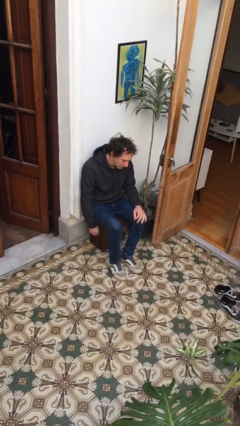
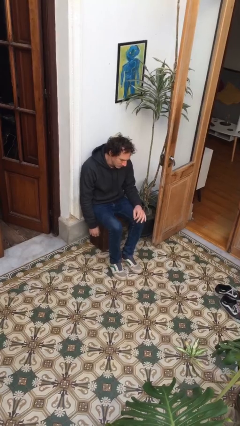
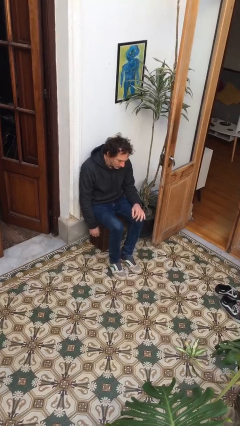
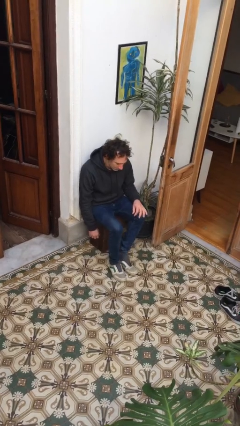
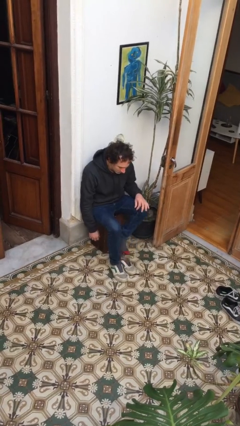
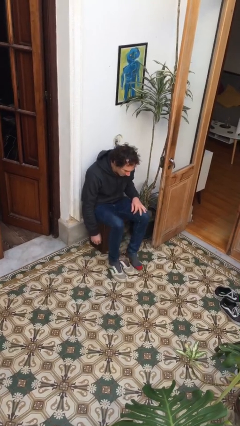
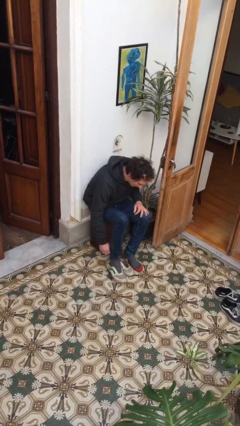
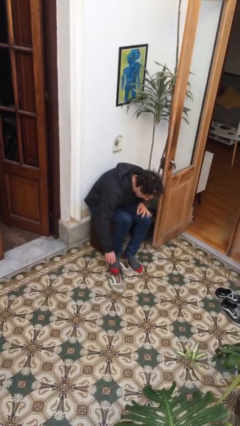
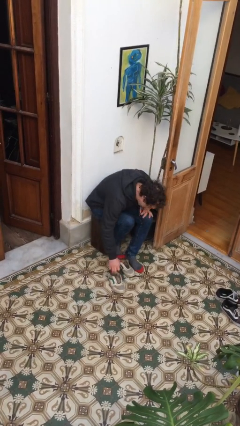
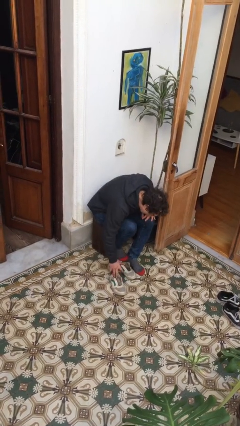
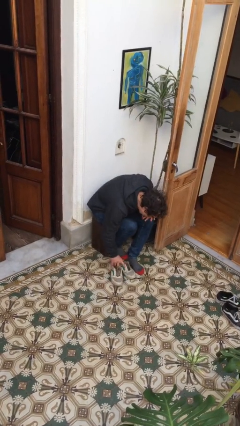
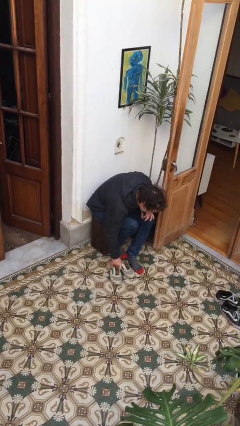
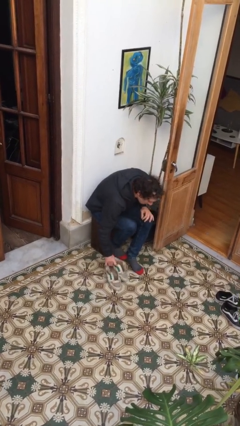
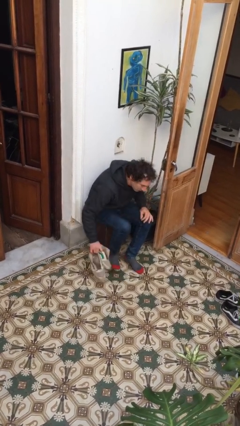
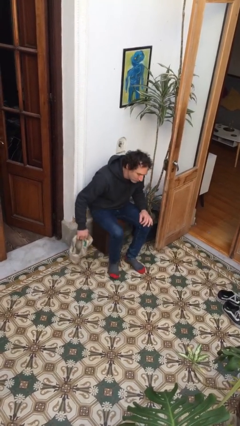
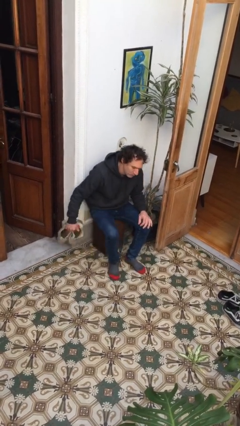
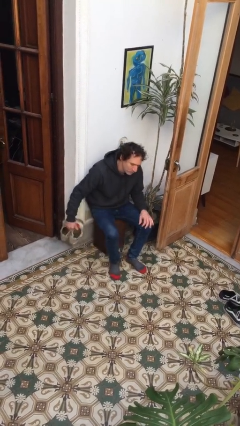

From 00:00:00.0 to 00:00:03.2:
person takes off shoes

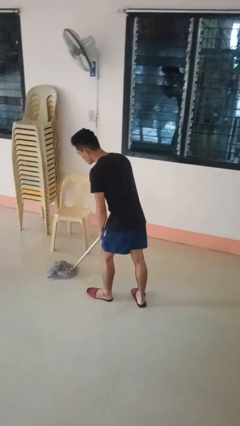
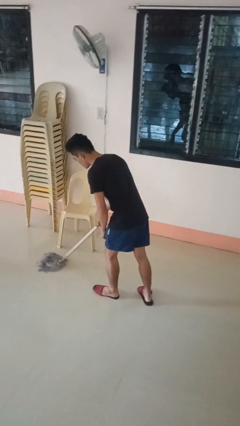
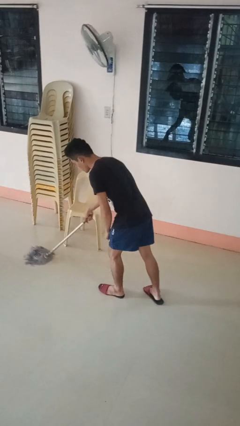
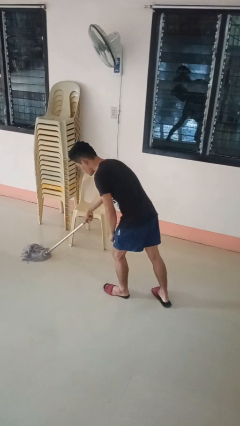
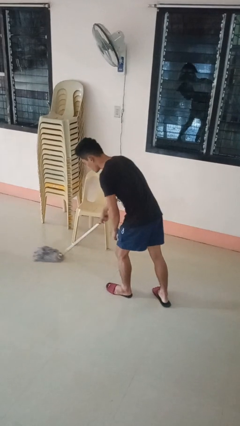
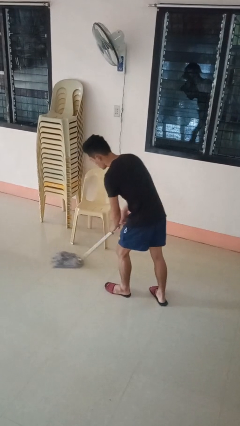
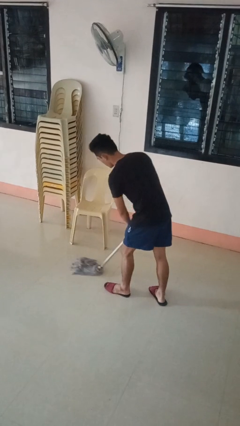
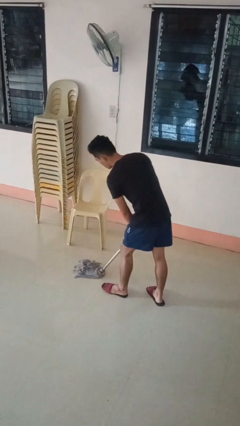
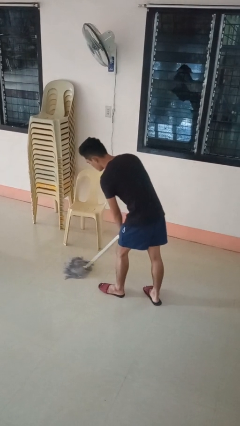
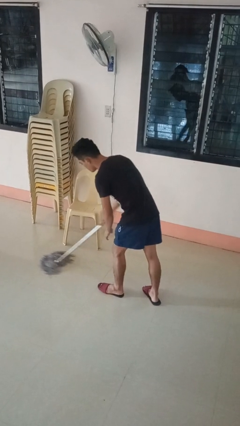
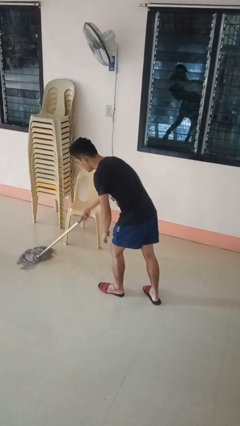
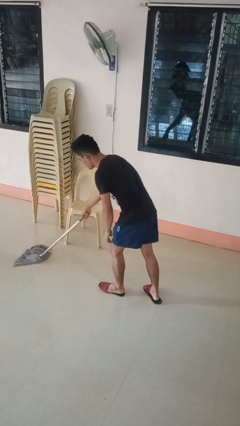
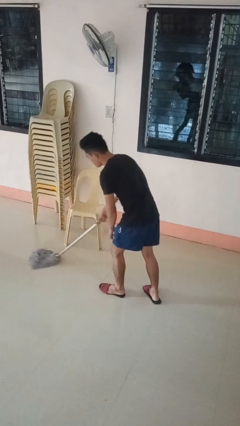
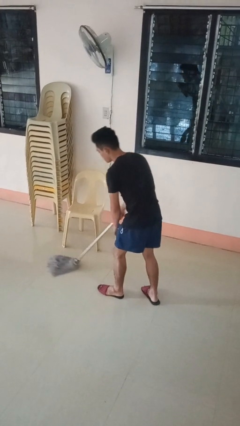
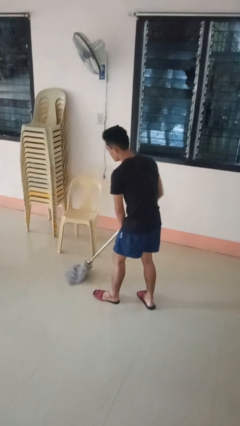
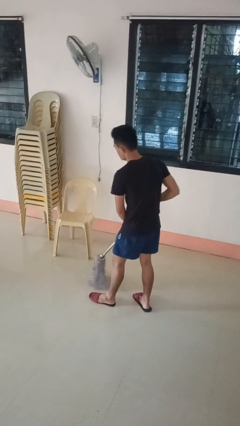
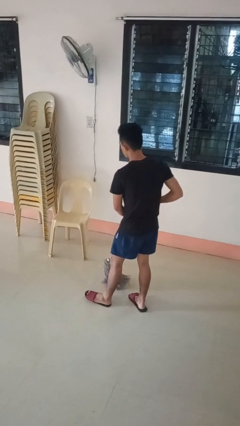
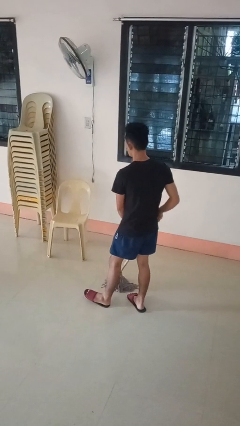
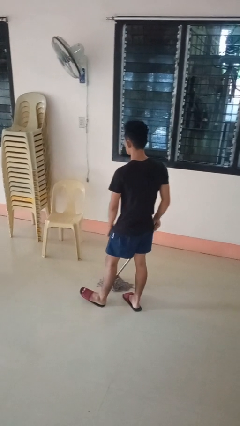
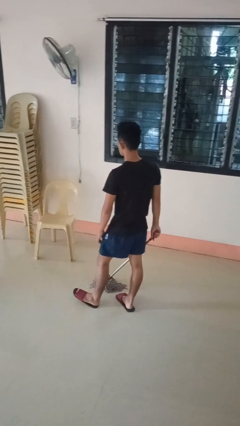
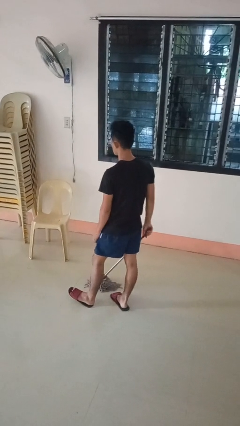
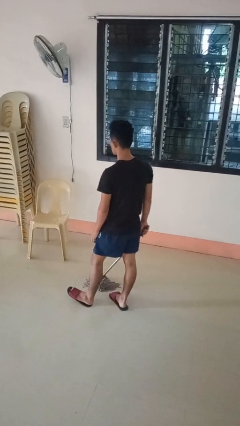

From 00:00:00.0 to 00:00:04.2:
person mops

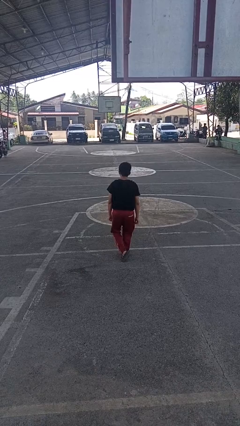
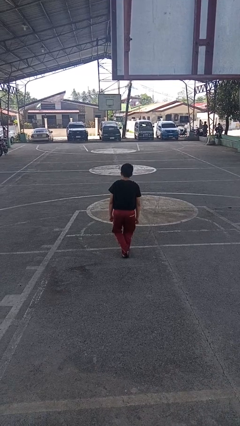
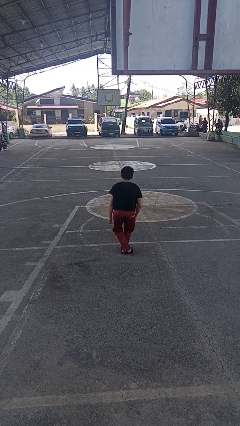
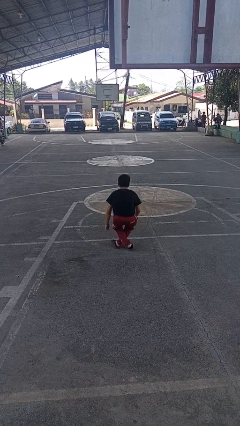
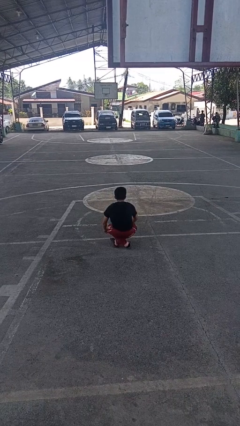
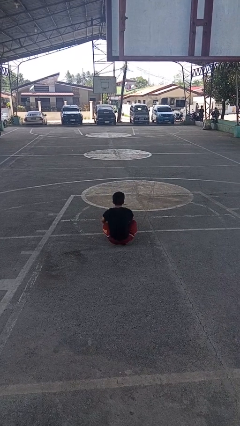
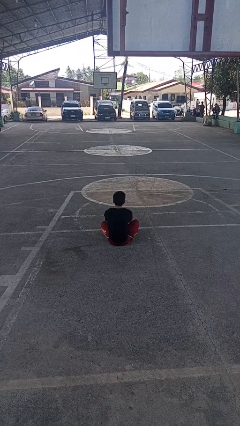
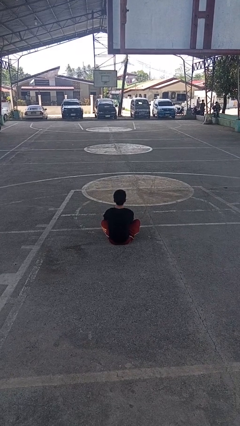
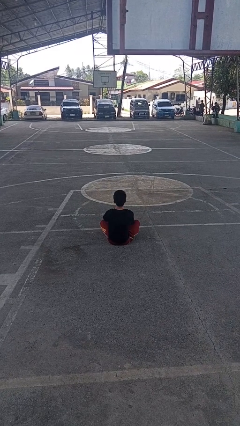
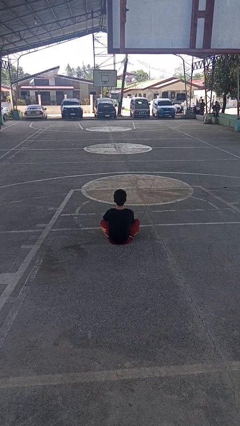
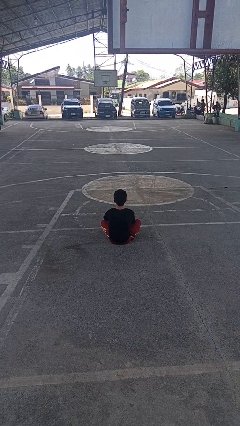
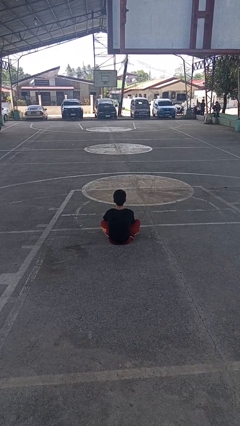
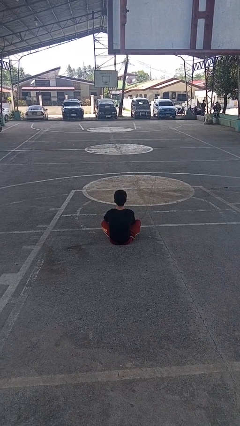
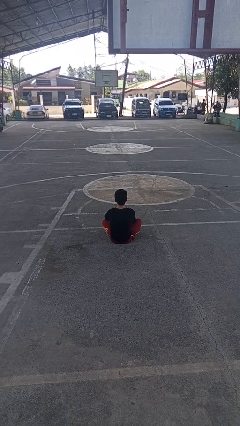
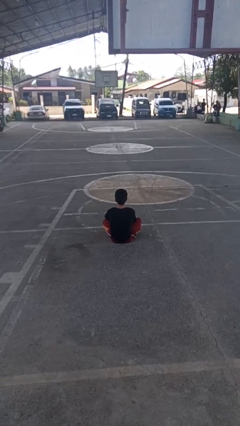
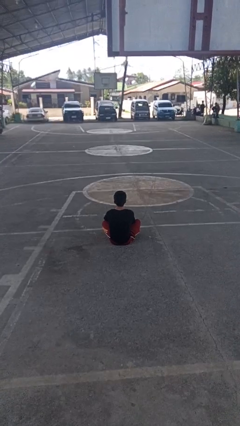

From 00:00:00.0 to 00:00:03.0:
person sits crisscross

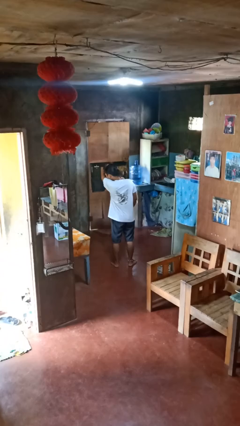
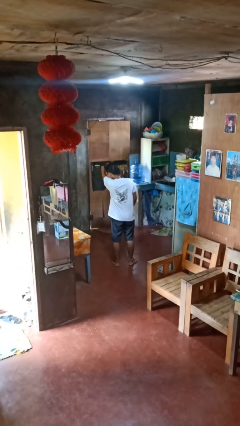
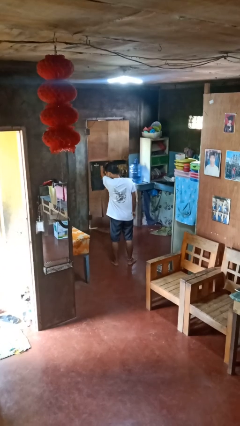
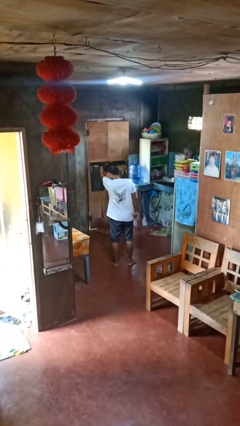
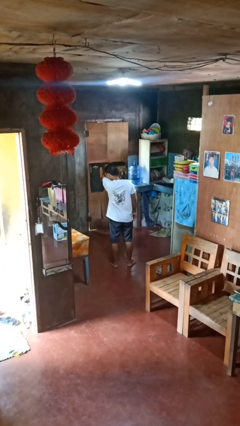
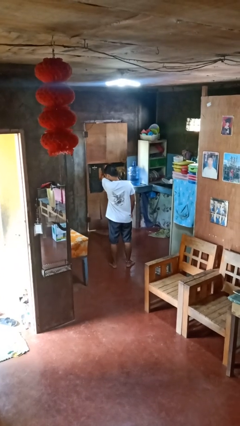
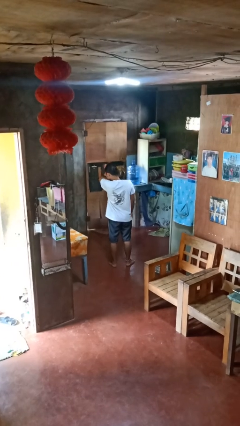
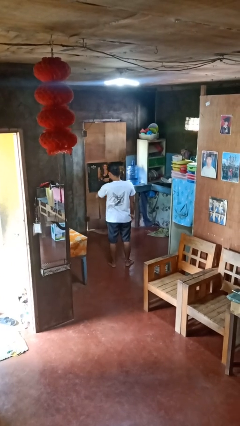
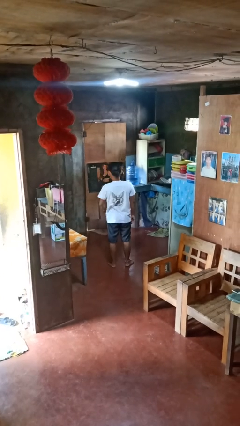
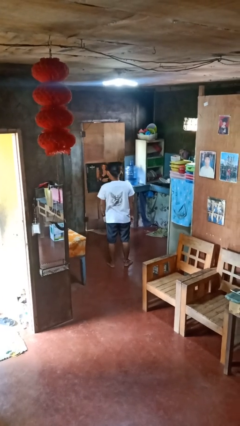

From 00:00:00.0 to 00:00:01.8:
person sneezes into arm

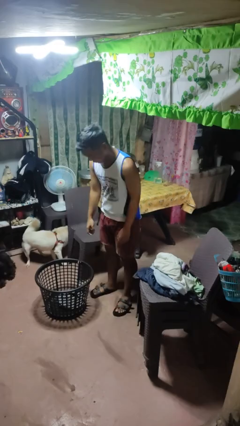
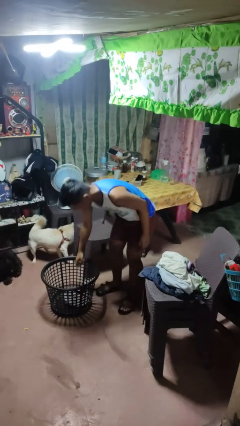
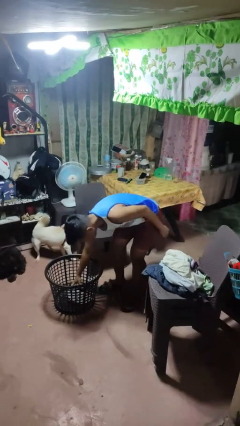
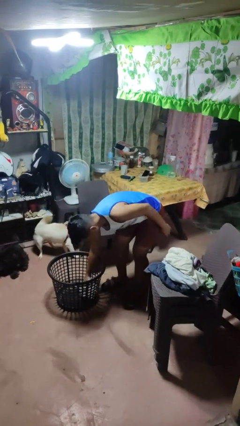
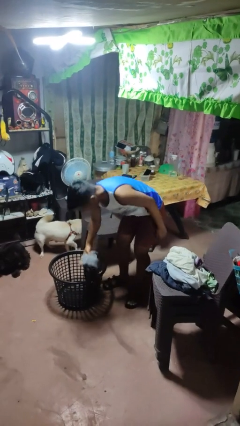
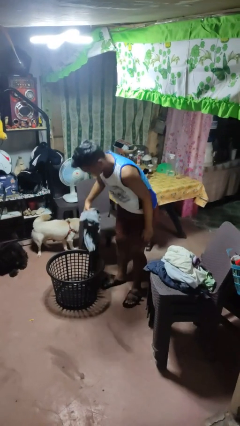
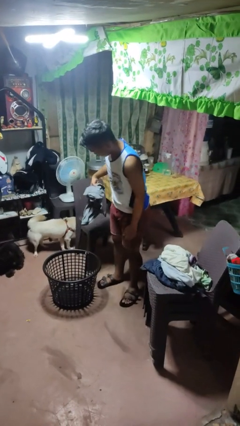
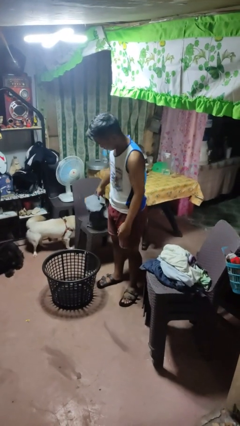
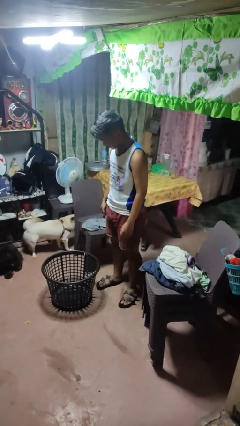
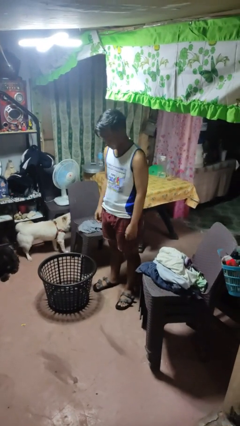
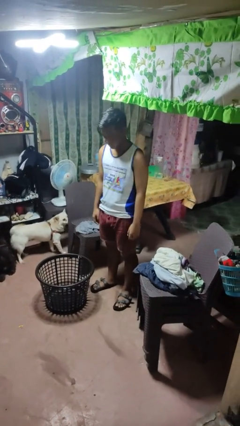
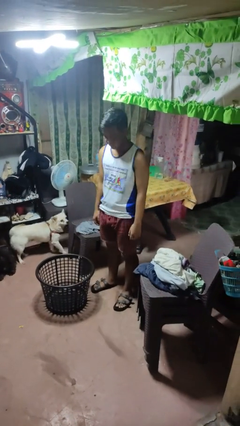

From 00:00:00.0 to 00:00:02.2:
person takes object from basket

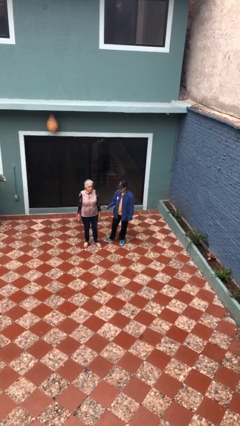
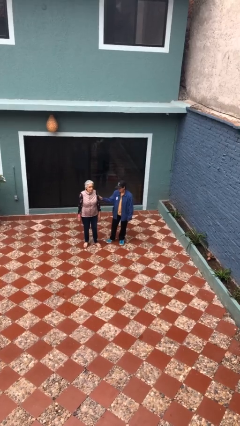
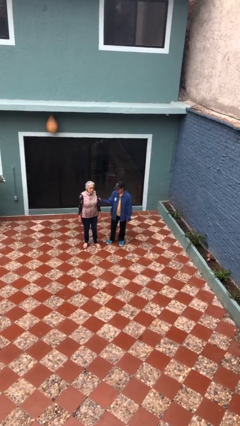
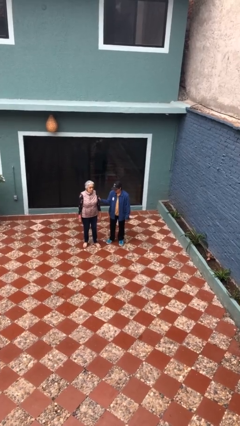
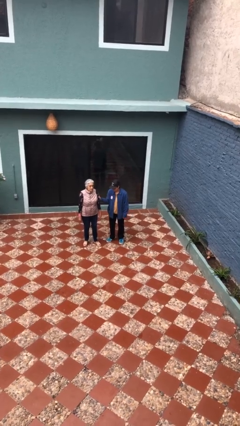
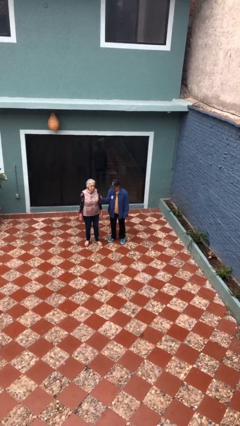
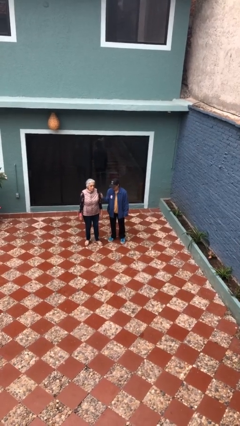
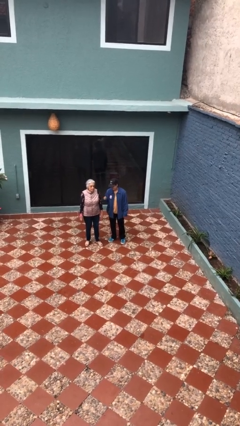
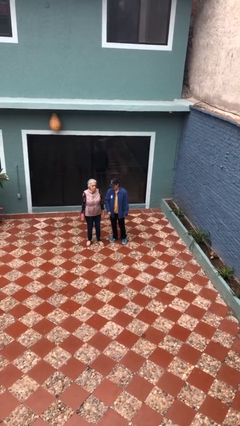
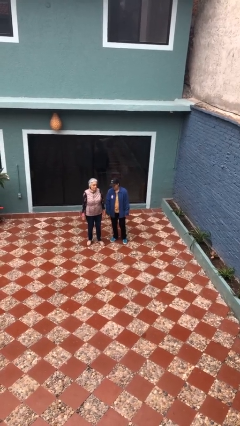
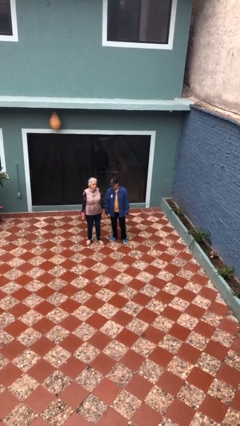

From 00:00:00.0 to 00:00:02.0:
person grabs person by forearm

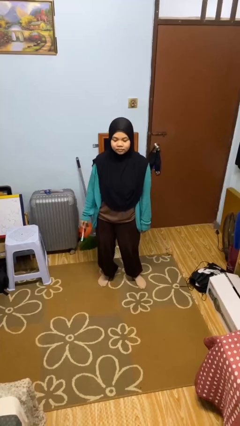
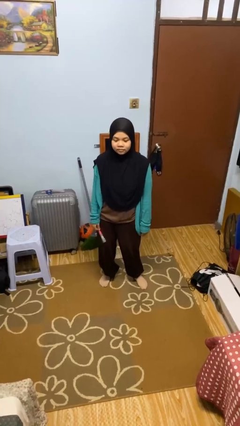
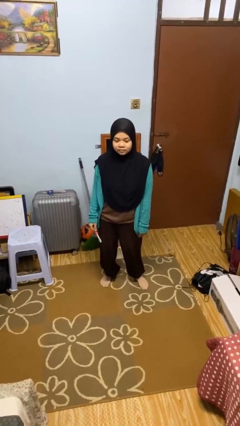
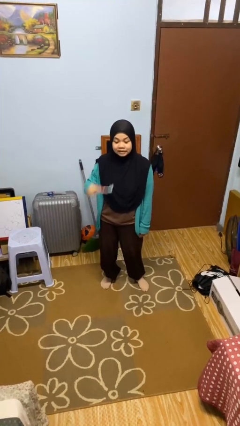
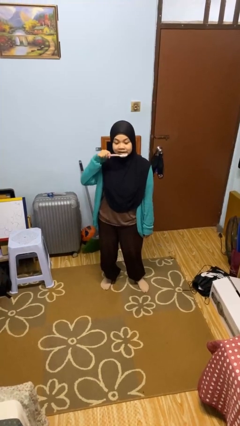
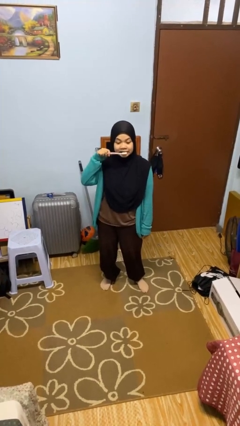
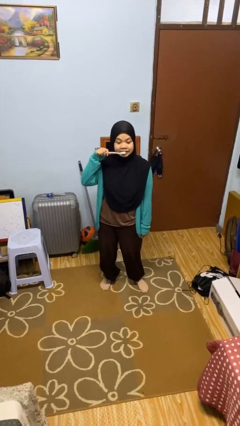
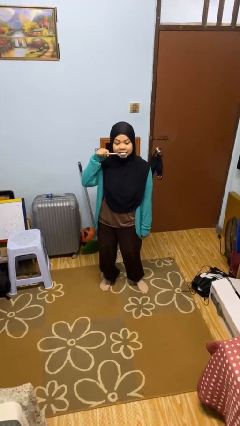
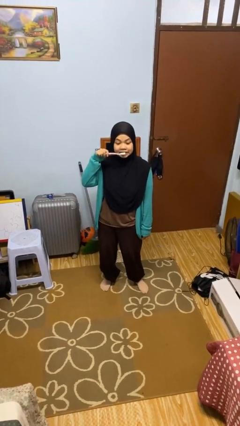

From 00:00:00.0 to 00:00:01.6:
person brushes teeth
